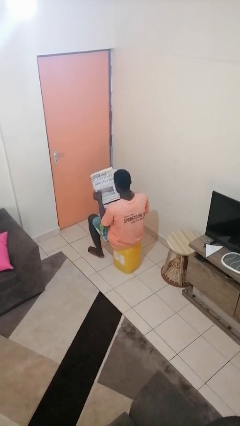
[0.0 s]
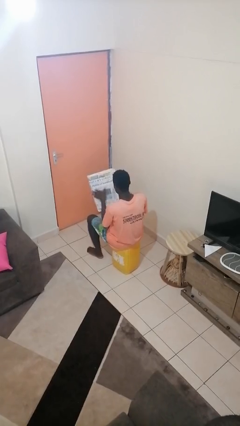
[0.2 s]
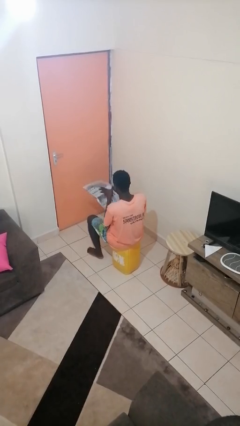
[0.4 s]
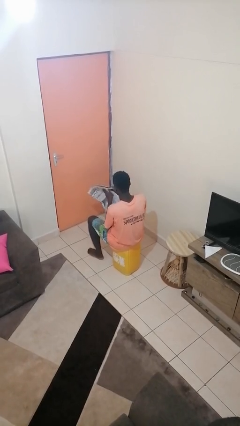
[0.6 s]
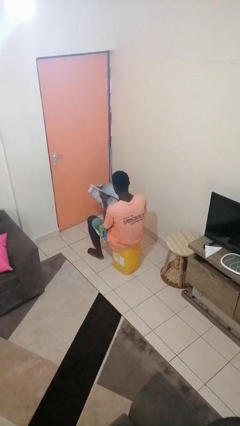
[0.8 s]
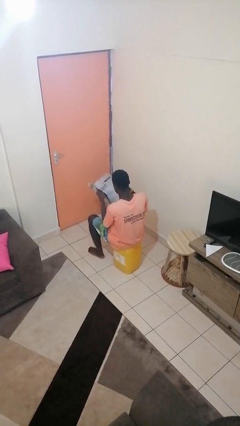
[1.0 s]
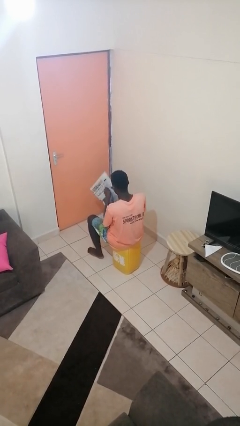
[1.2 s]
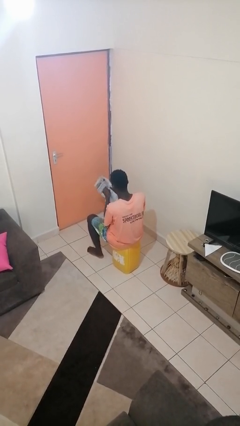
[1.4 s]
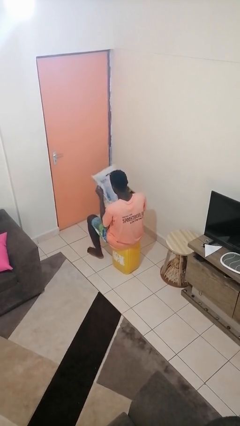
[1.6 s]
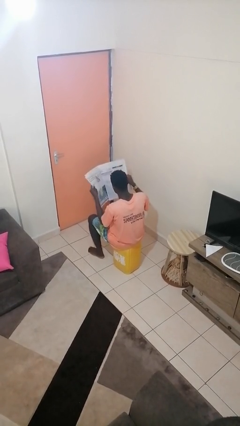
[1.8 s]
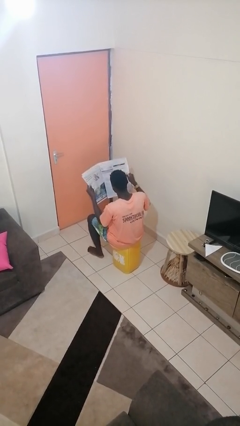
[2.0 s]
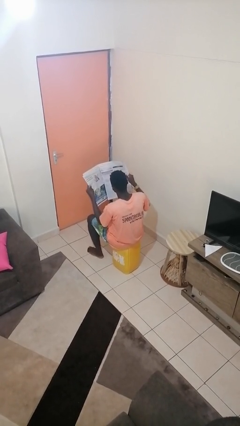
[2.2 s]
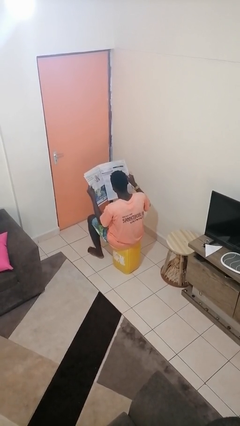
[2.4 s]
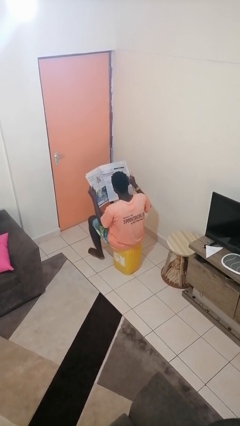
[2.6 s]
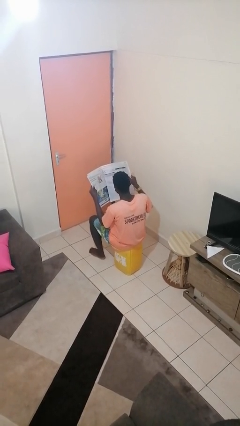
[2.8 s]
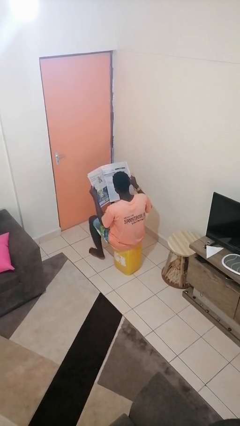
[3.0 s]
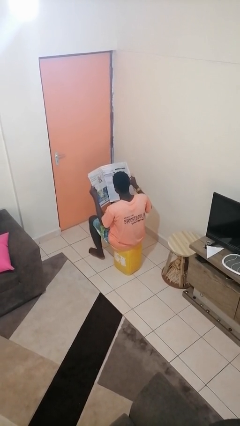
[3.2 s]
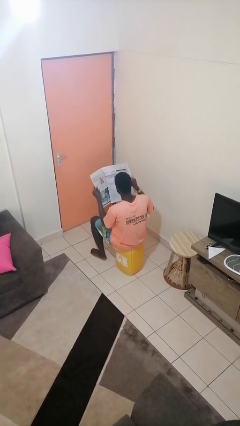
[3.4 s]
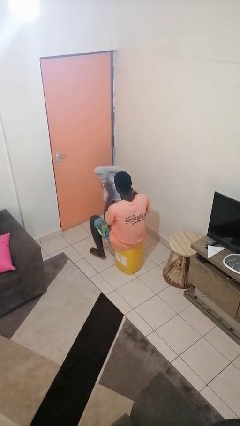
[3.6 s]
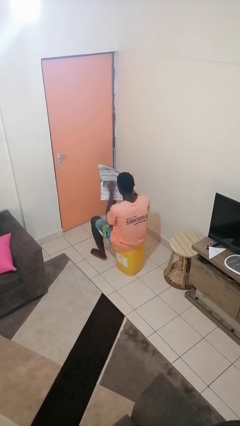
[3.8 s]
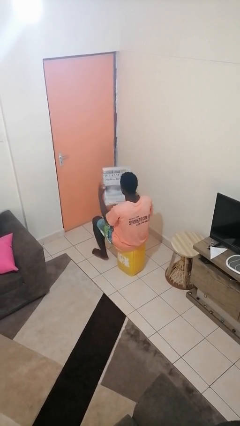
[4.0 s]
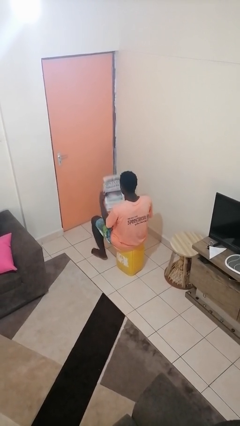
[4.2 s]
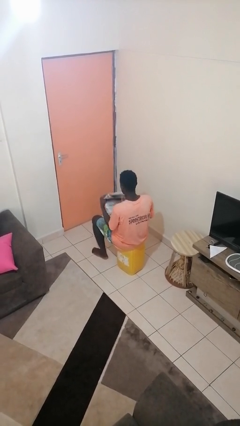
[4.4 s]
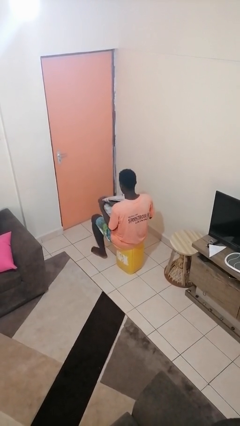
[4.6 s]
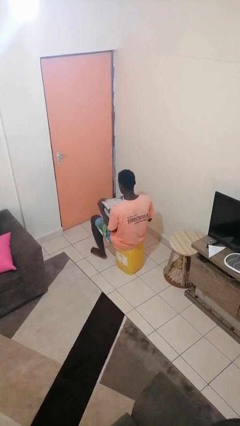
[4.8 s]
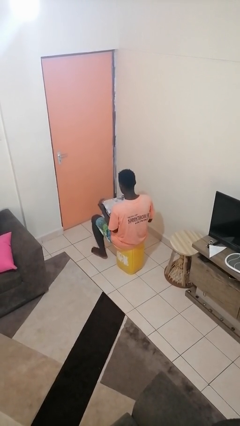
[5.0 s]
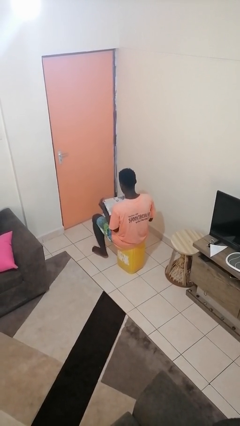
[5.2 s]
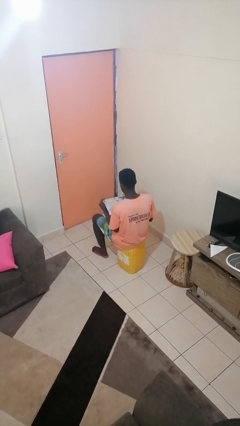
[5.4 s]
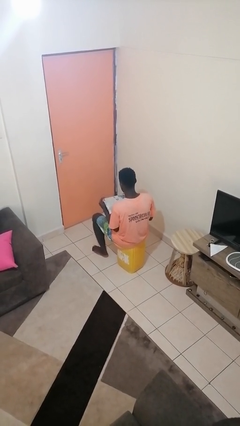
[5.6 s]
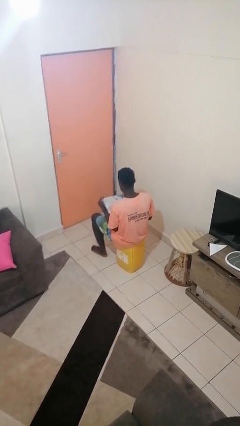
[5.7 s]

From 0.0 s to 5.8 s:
person reads newspaper

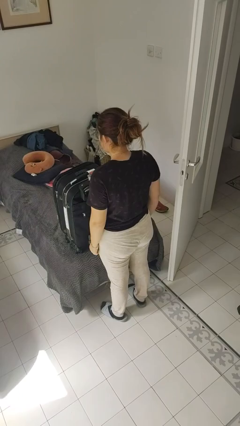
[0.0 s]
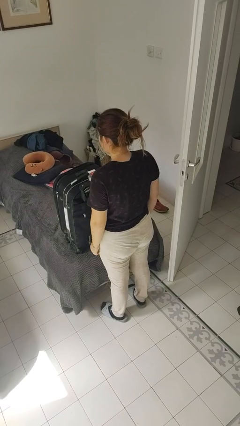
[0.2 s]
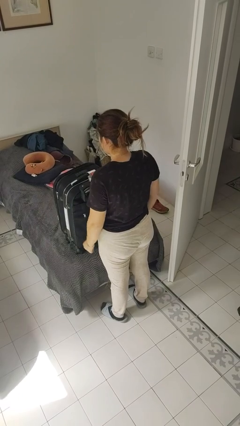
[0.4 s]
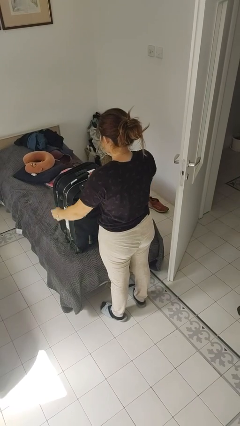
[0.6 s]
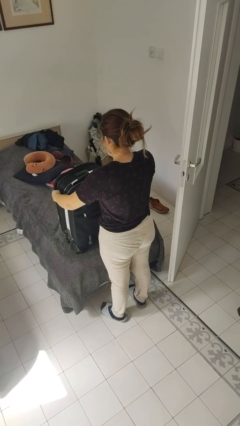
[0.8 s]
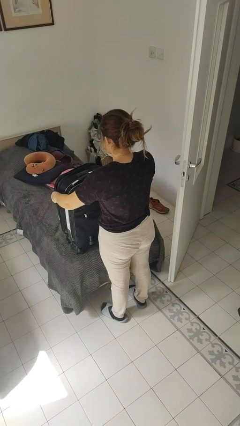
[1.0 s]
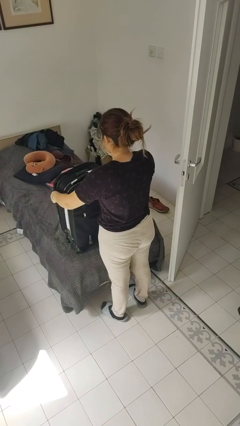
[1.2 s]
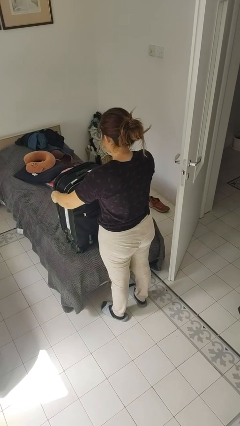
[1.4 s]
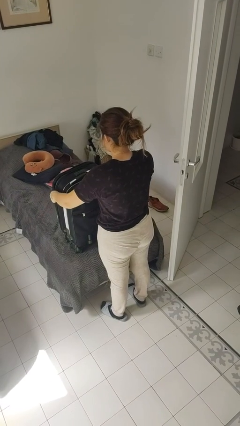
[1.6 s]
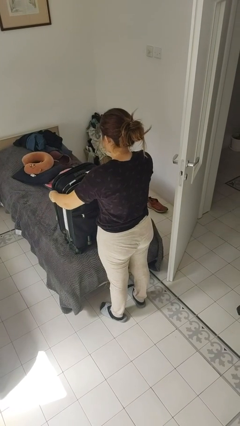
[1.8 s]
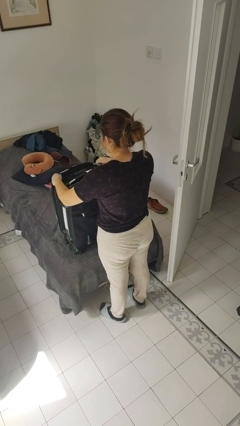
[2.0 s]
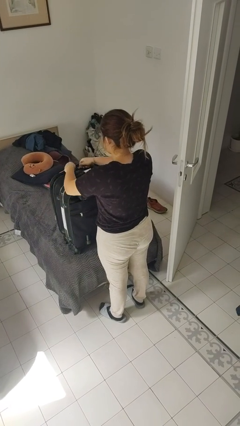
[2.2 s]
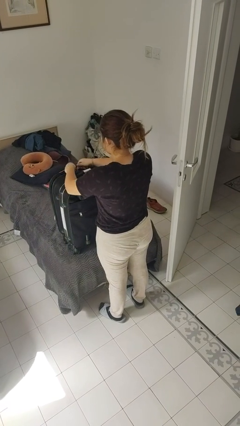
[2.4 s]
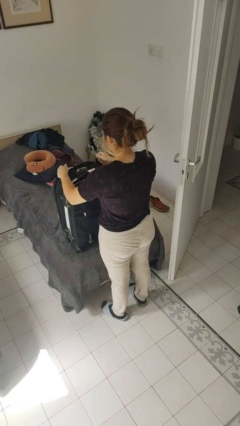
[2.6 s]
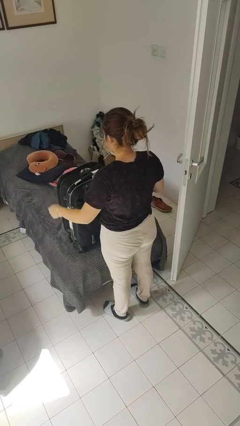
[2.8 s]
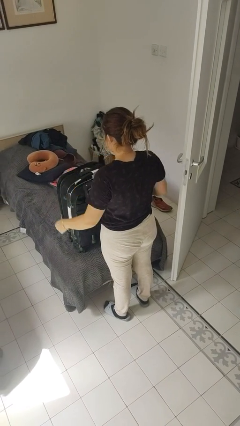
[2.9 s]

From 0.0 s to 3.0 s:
person closes suitcase

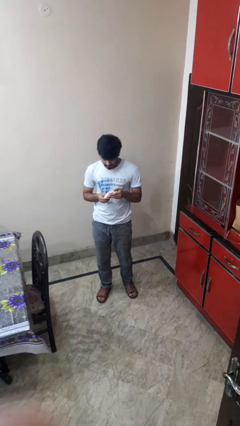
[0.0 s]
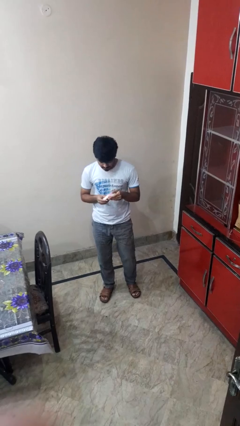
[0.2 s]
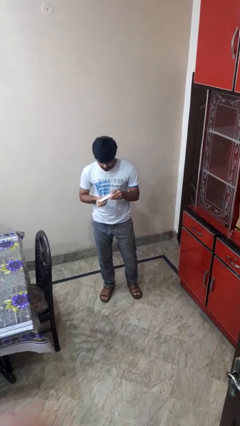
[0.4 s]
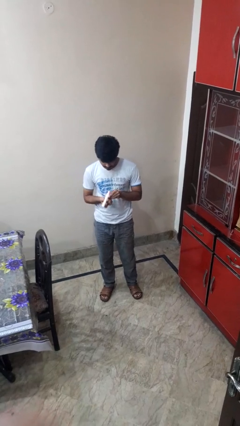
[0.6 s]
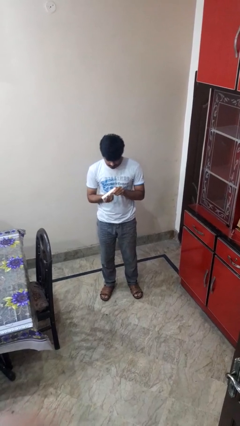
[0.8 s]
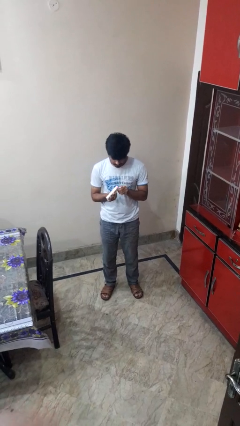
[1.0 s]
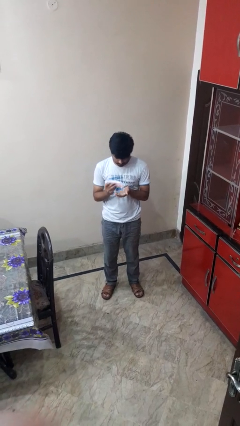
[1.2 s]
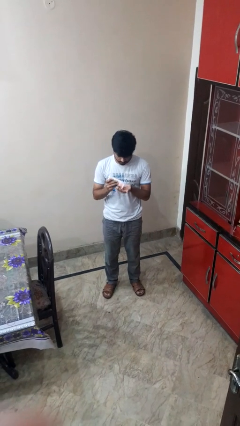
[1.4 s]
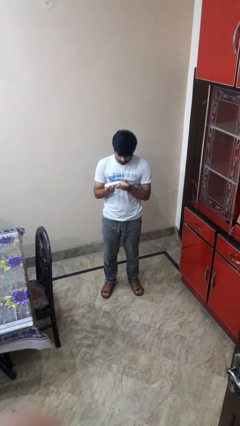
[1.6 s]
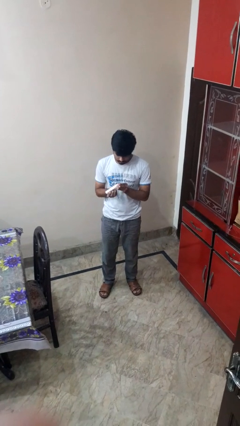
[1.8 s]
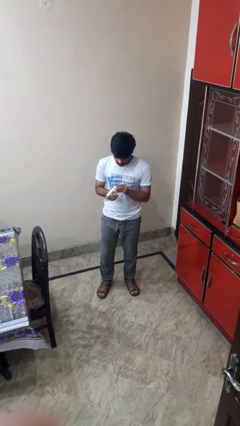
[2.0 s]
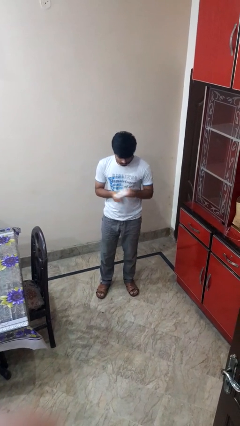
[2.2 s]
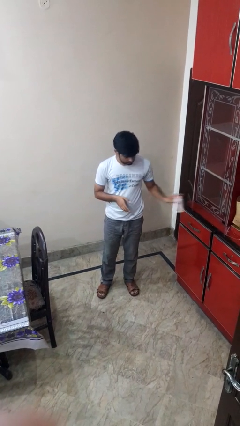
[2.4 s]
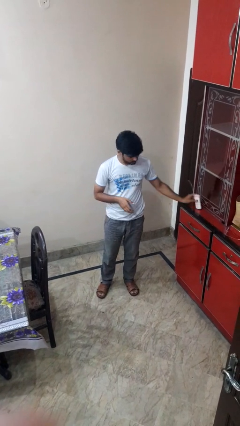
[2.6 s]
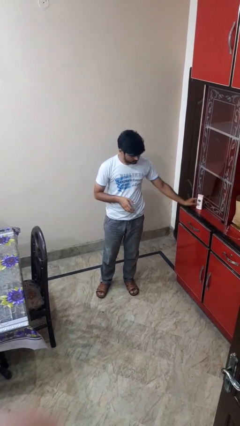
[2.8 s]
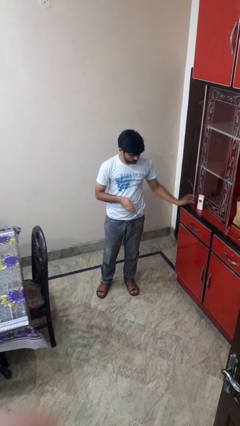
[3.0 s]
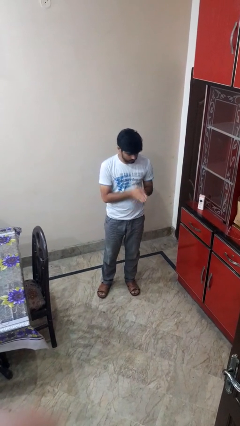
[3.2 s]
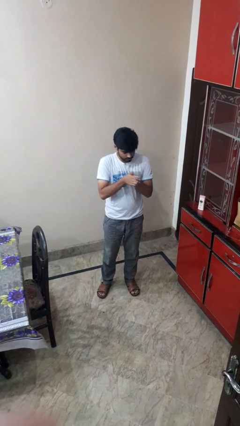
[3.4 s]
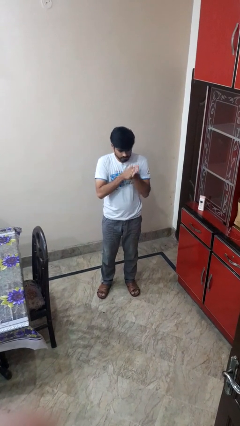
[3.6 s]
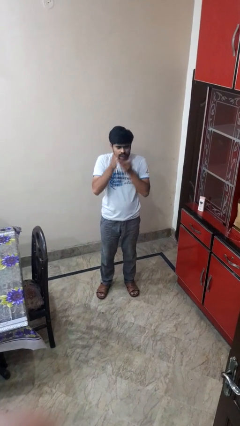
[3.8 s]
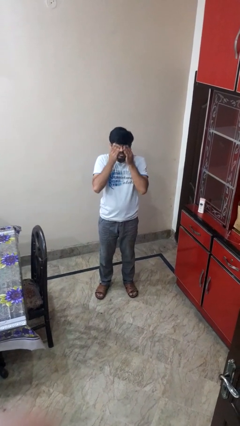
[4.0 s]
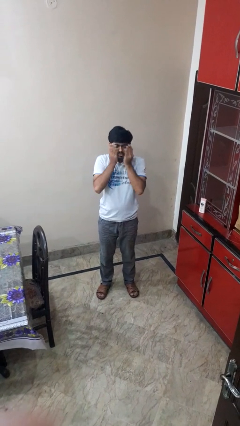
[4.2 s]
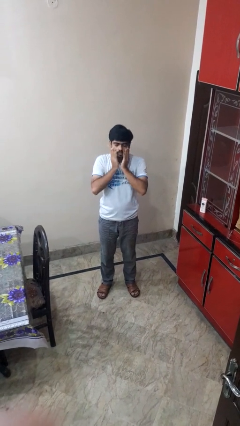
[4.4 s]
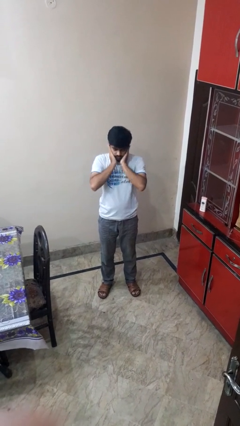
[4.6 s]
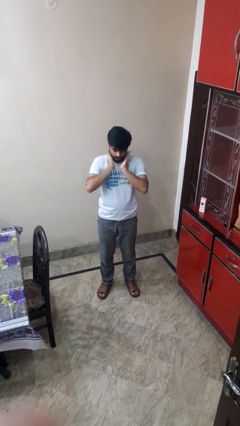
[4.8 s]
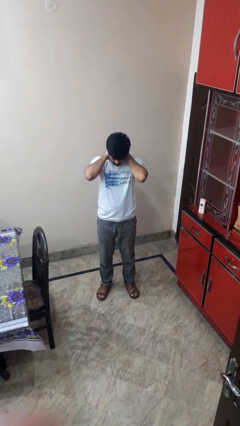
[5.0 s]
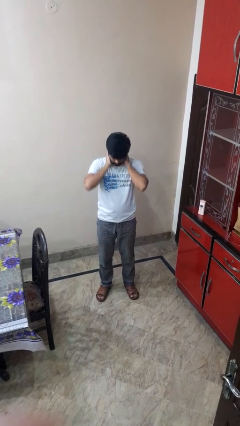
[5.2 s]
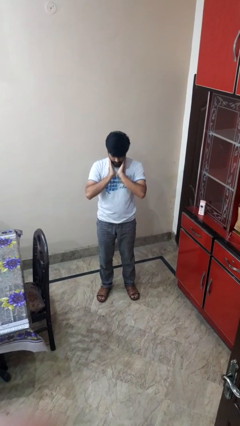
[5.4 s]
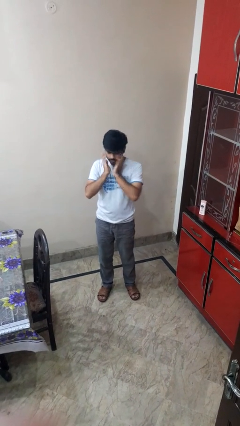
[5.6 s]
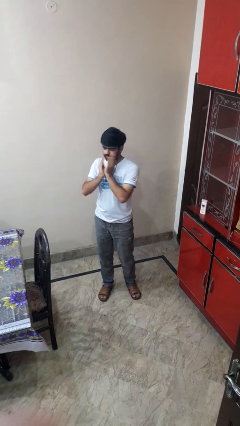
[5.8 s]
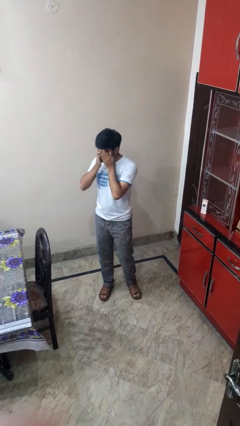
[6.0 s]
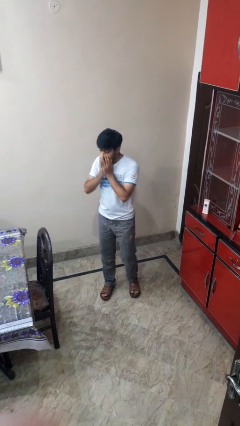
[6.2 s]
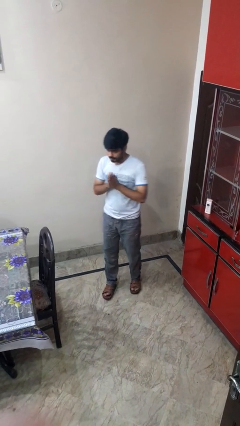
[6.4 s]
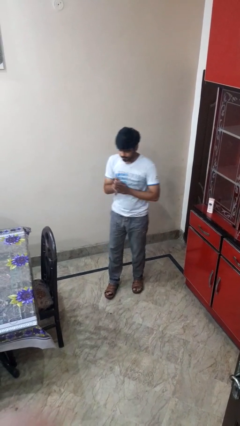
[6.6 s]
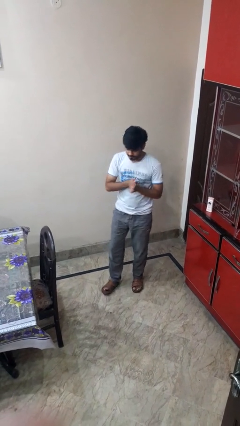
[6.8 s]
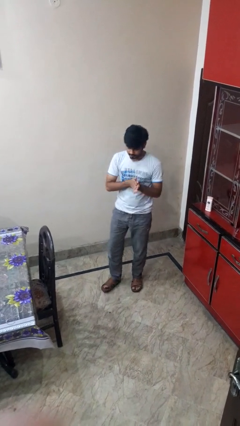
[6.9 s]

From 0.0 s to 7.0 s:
person applies facial moisturizer

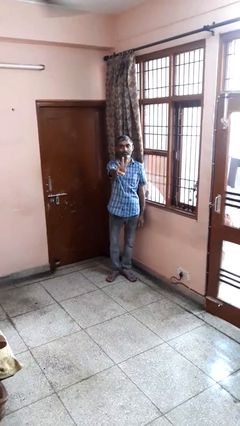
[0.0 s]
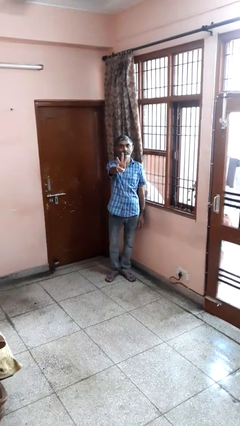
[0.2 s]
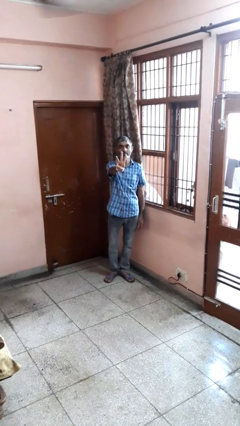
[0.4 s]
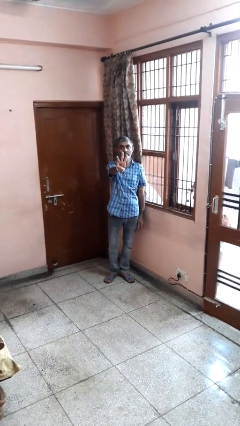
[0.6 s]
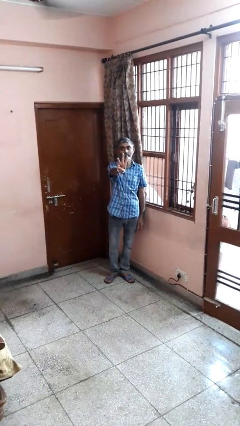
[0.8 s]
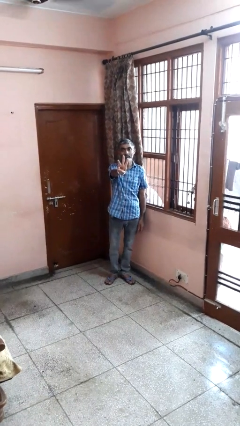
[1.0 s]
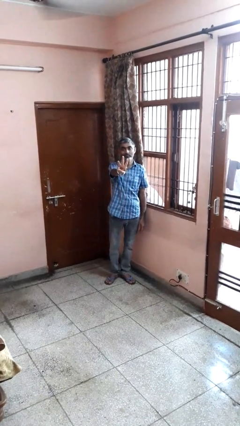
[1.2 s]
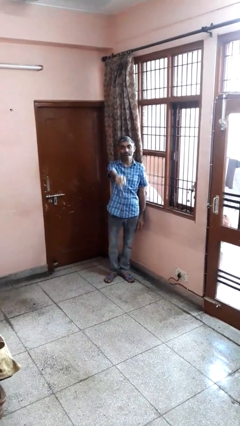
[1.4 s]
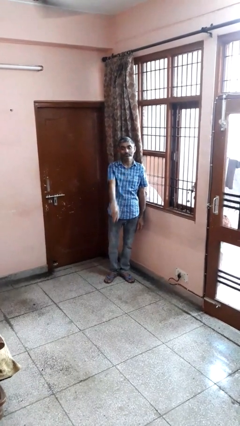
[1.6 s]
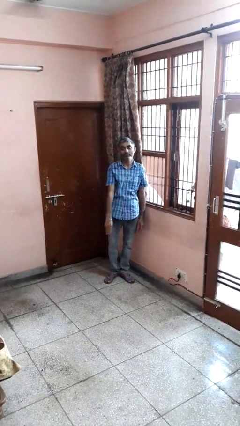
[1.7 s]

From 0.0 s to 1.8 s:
person gestures number three
